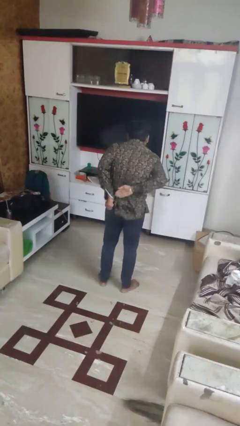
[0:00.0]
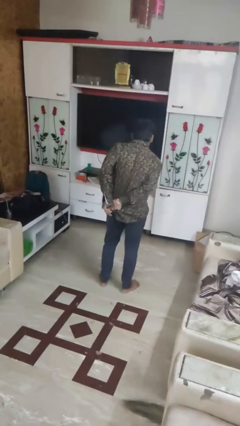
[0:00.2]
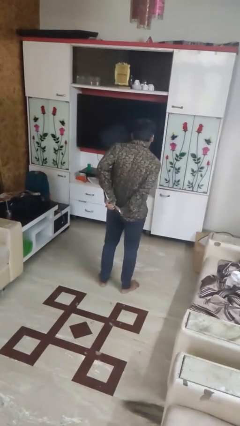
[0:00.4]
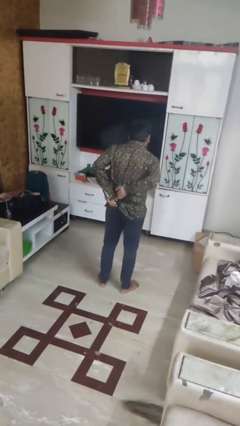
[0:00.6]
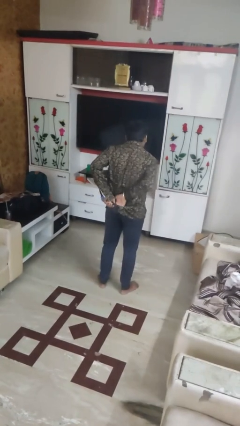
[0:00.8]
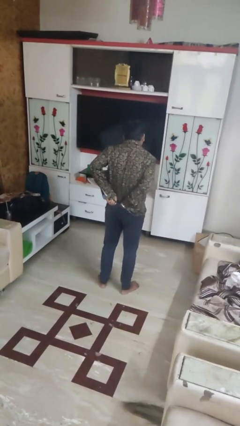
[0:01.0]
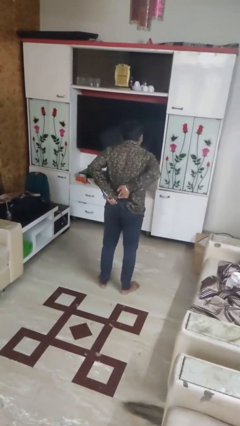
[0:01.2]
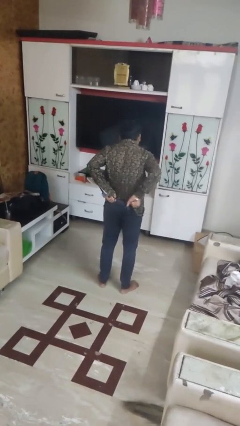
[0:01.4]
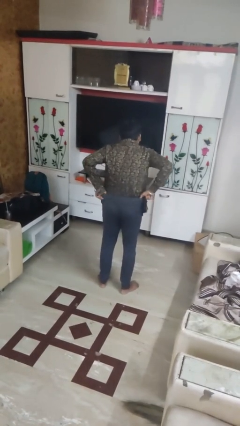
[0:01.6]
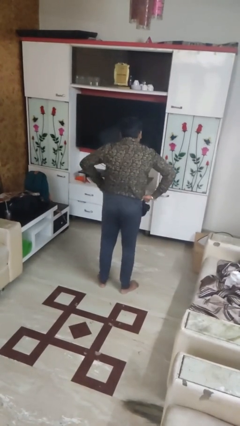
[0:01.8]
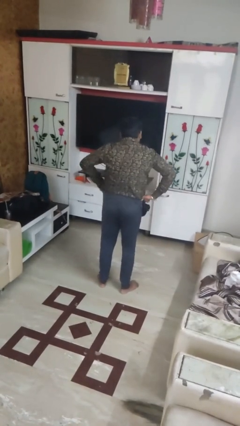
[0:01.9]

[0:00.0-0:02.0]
person tucks in shirt

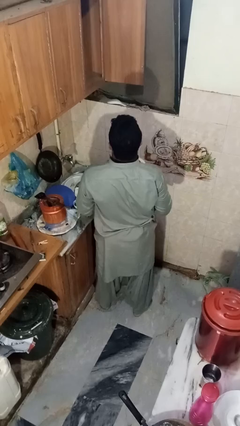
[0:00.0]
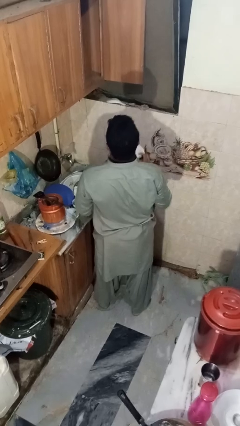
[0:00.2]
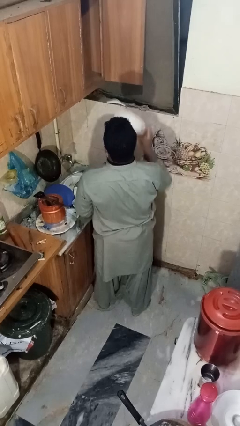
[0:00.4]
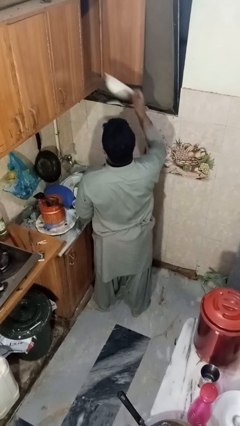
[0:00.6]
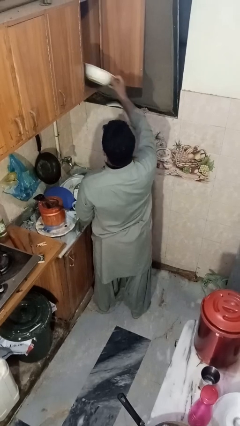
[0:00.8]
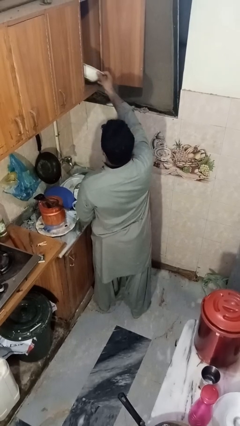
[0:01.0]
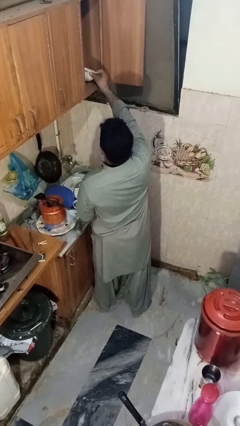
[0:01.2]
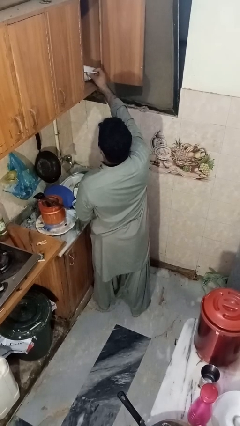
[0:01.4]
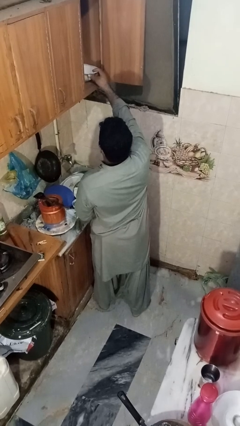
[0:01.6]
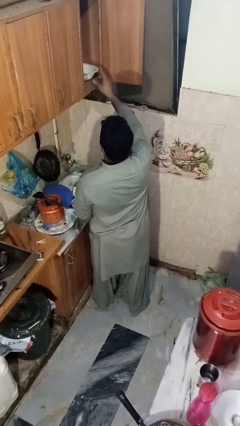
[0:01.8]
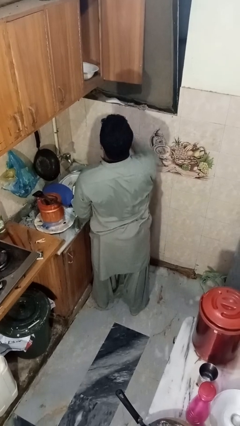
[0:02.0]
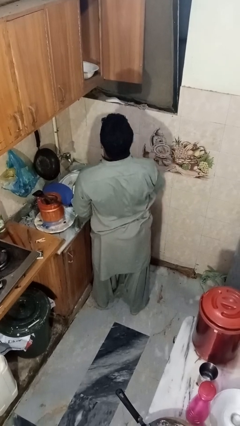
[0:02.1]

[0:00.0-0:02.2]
person puts object in cabinet

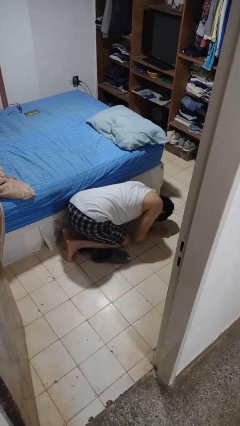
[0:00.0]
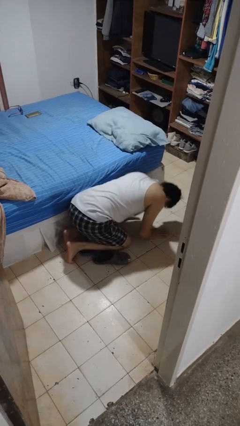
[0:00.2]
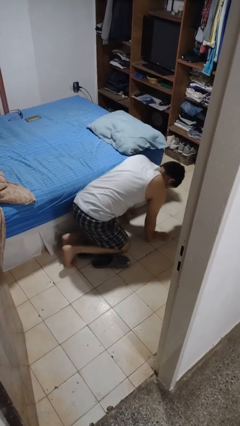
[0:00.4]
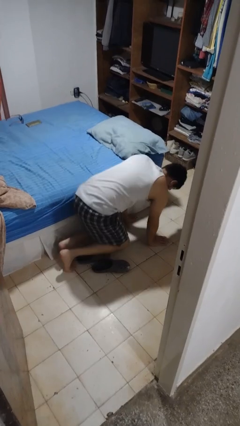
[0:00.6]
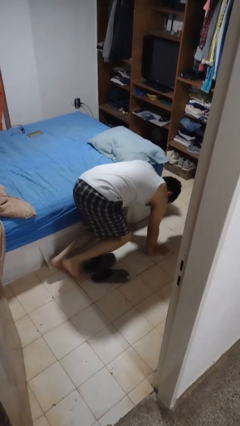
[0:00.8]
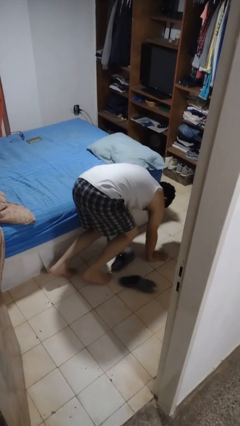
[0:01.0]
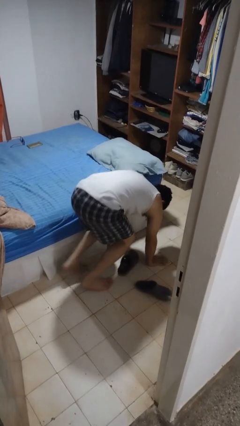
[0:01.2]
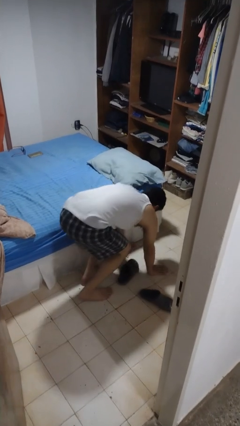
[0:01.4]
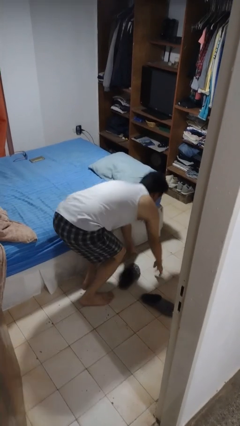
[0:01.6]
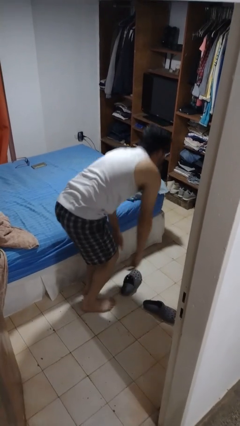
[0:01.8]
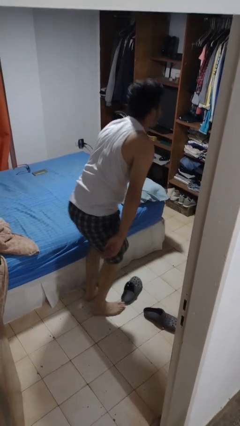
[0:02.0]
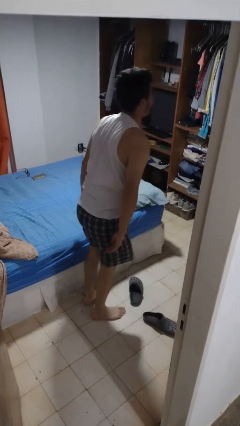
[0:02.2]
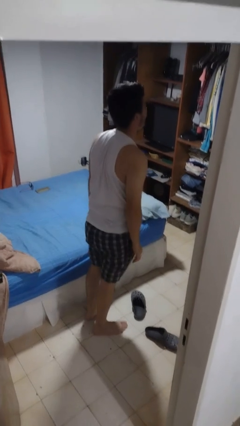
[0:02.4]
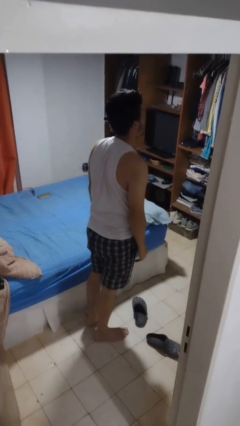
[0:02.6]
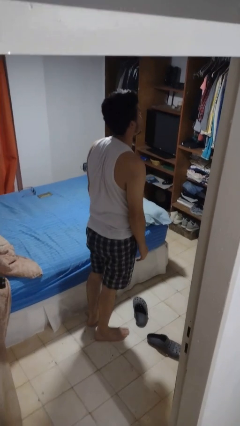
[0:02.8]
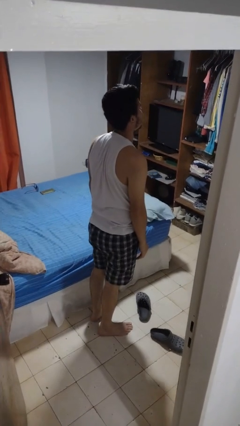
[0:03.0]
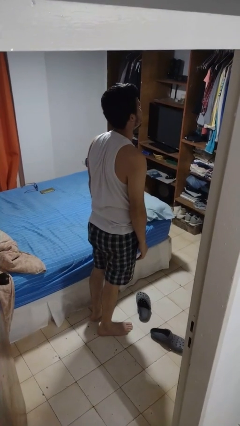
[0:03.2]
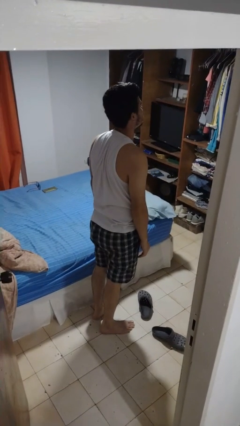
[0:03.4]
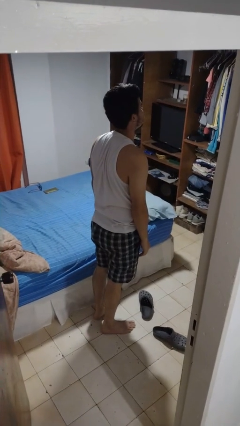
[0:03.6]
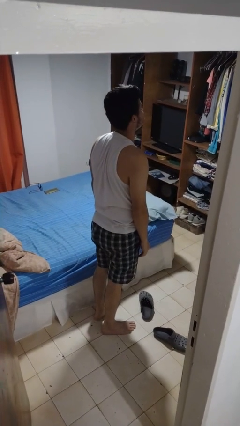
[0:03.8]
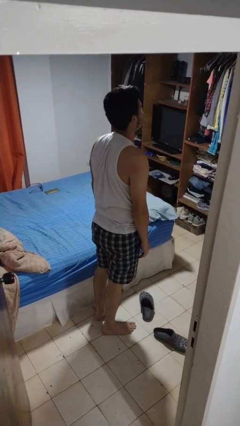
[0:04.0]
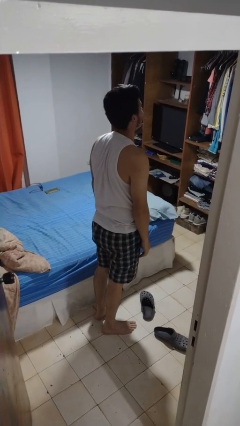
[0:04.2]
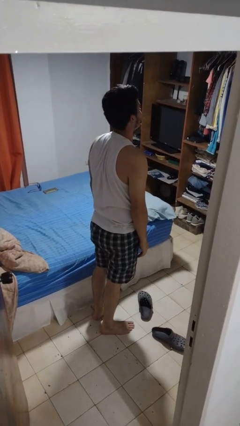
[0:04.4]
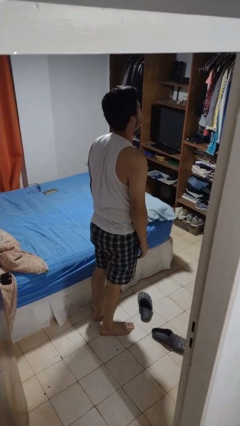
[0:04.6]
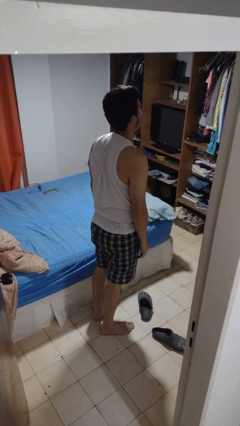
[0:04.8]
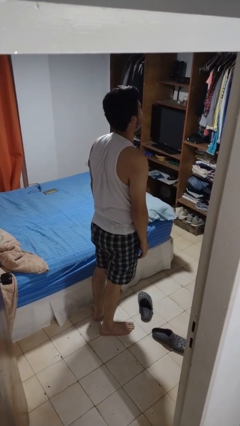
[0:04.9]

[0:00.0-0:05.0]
person stands up from floor

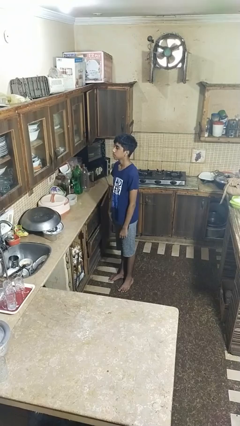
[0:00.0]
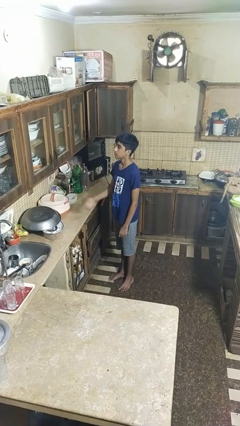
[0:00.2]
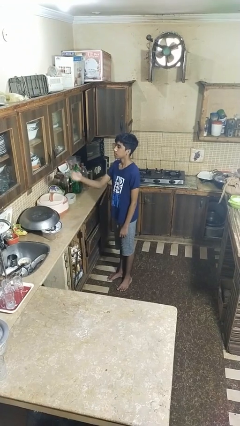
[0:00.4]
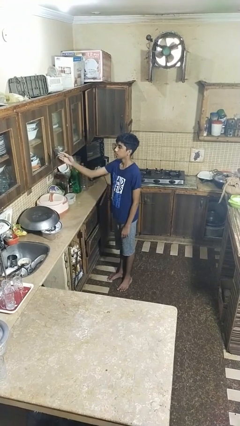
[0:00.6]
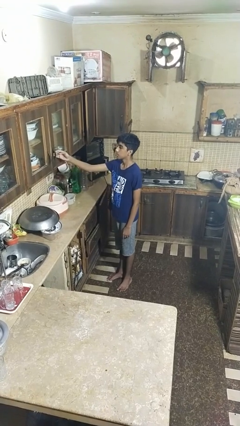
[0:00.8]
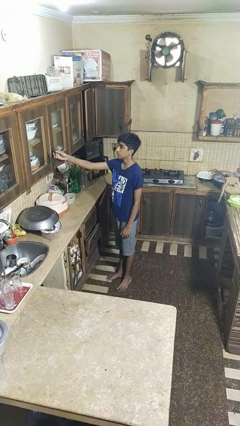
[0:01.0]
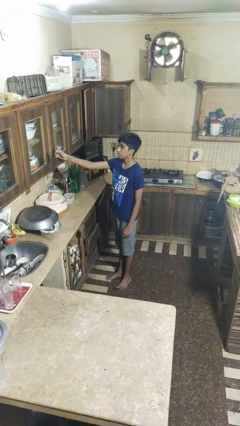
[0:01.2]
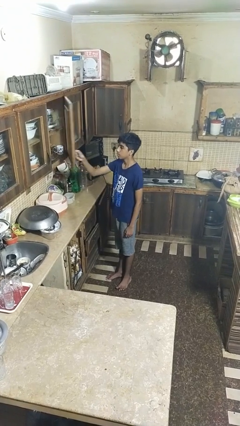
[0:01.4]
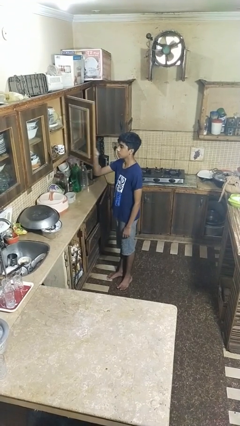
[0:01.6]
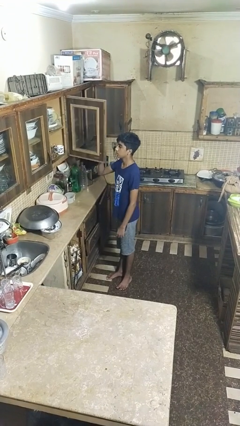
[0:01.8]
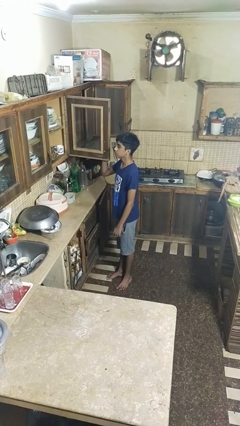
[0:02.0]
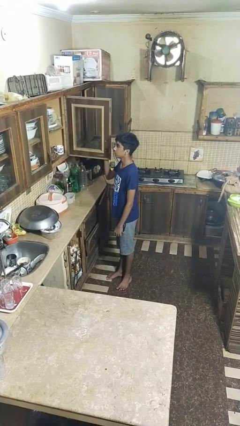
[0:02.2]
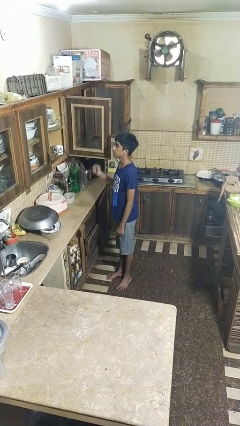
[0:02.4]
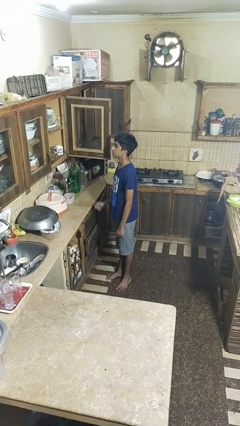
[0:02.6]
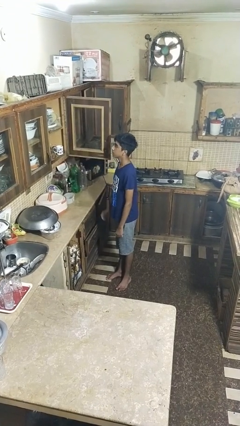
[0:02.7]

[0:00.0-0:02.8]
person opens cabinet

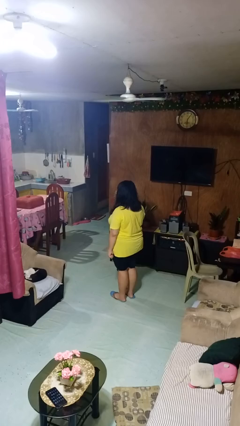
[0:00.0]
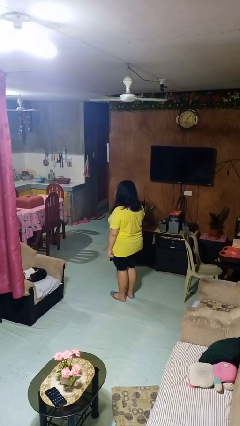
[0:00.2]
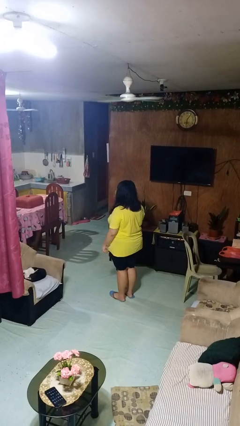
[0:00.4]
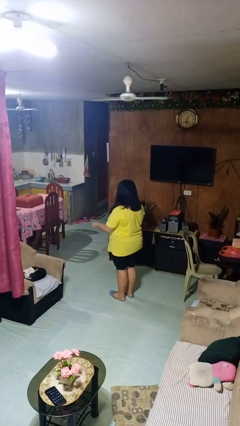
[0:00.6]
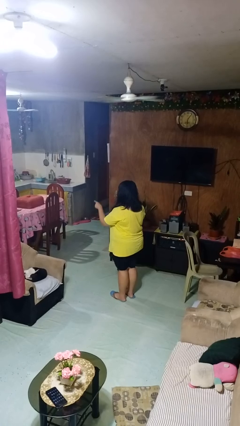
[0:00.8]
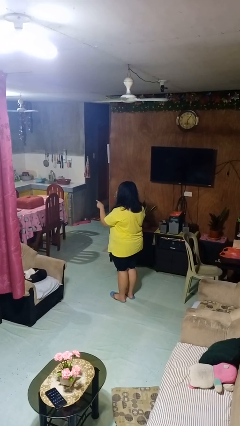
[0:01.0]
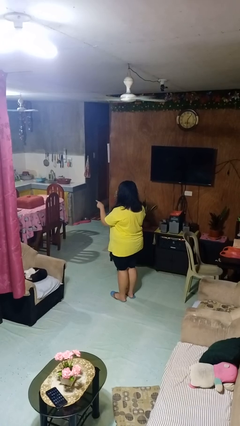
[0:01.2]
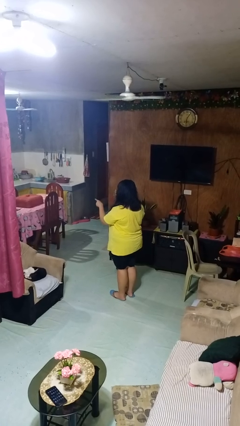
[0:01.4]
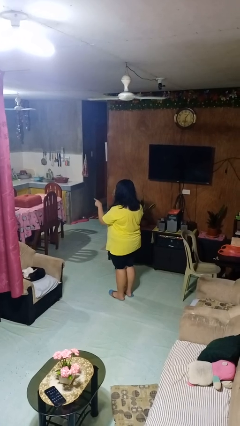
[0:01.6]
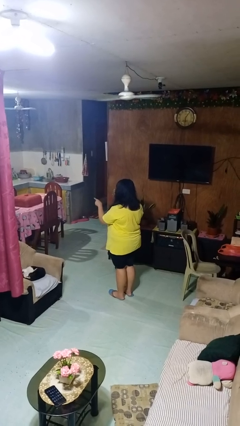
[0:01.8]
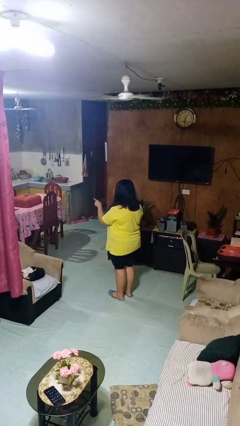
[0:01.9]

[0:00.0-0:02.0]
person points at person

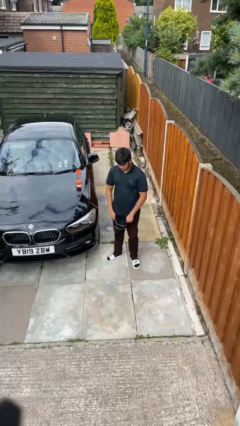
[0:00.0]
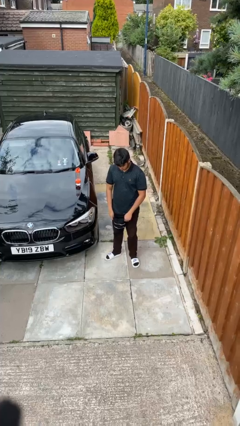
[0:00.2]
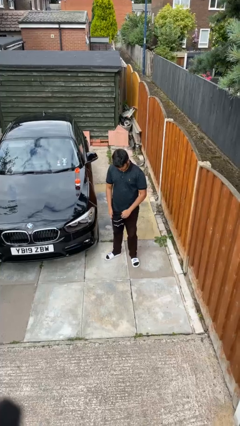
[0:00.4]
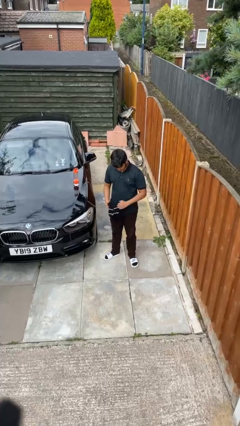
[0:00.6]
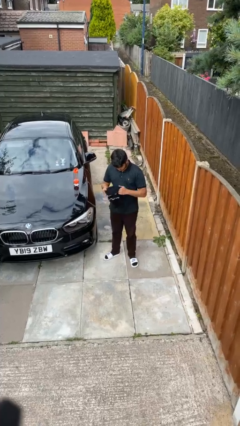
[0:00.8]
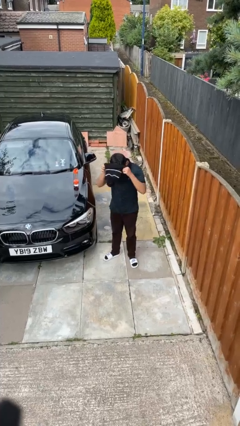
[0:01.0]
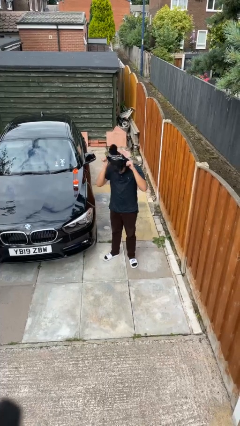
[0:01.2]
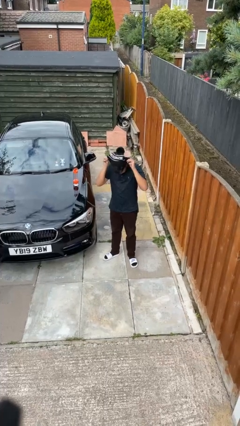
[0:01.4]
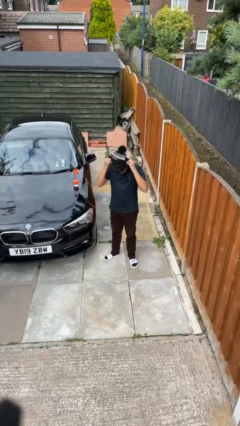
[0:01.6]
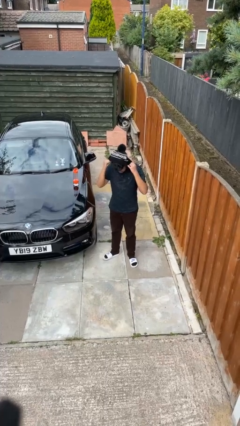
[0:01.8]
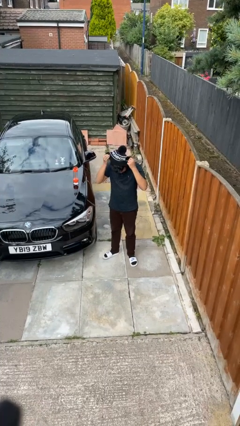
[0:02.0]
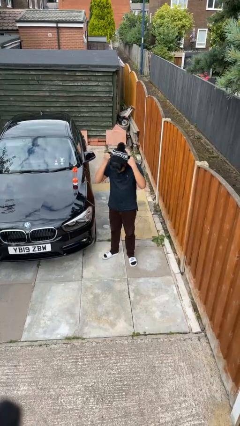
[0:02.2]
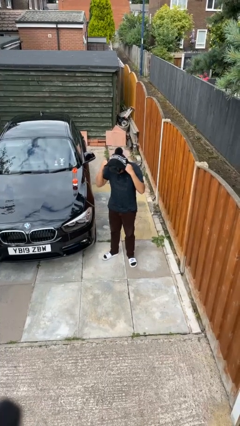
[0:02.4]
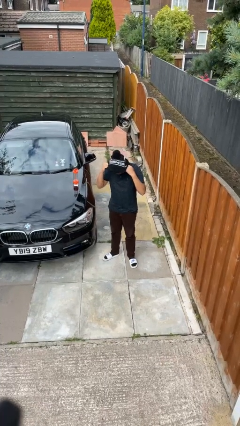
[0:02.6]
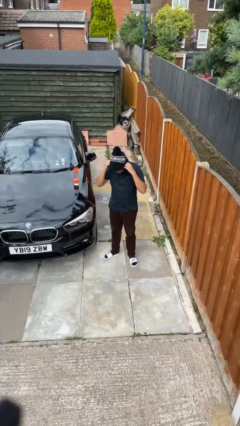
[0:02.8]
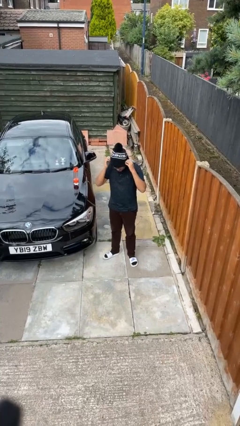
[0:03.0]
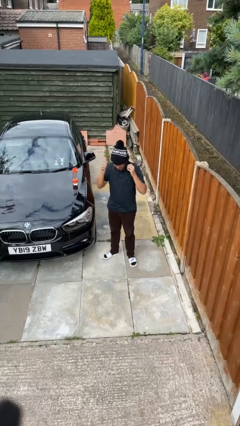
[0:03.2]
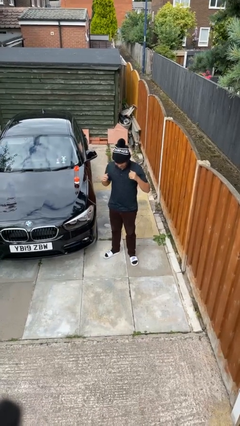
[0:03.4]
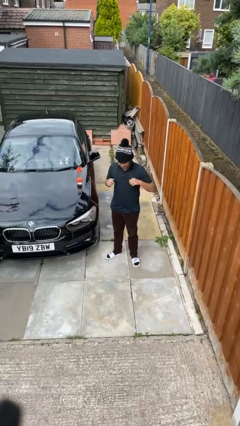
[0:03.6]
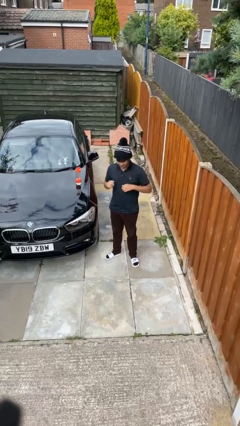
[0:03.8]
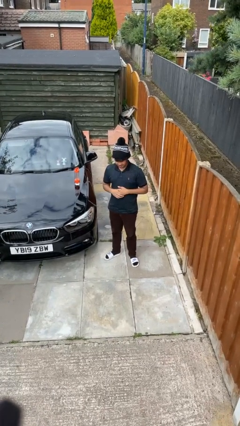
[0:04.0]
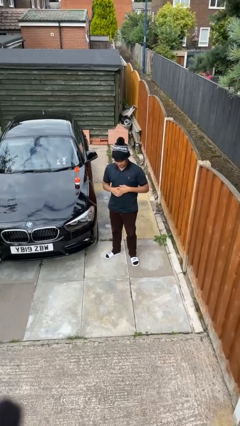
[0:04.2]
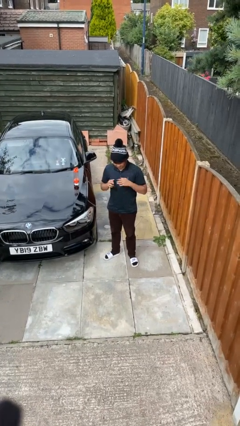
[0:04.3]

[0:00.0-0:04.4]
person puts on hat
